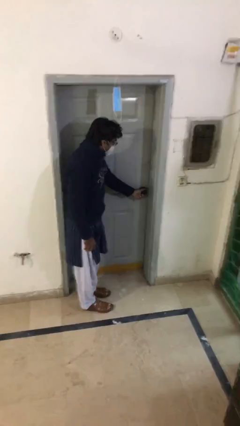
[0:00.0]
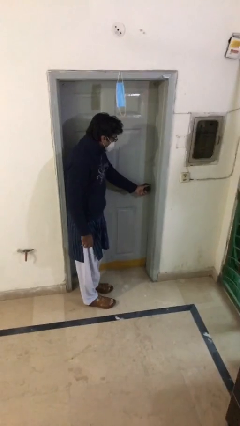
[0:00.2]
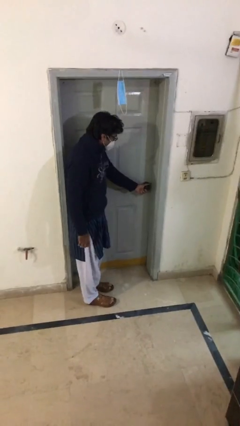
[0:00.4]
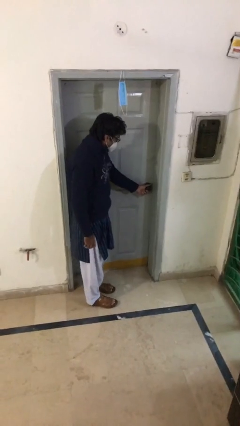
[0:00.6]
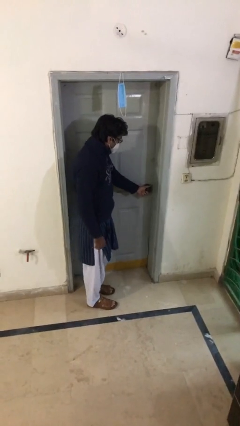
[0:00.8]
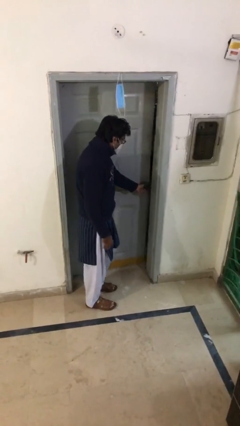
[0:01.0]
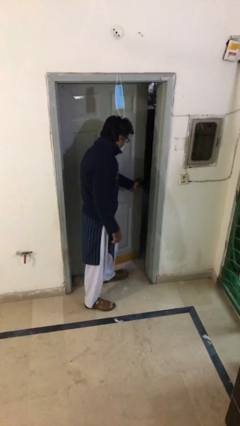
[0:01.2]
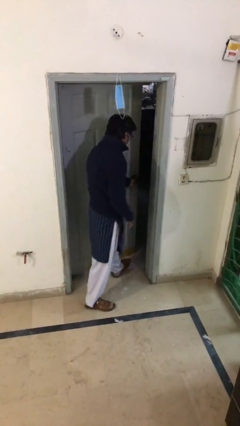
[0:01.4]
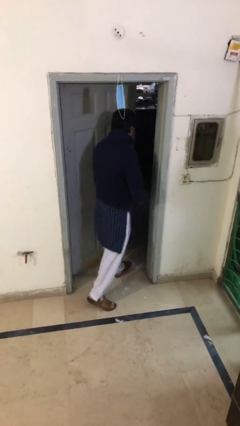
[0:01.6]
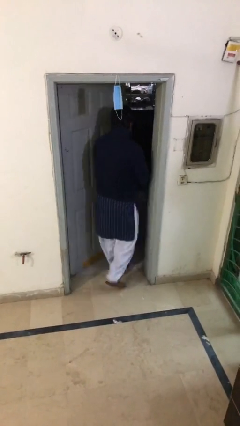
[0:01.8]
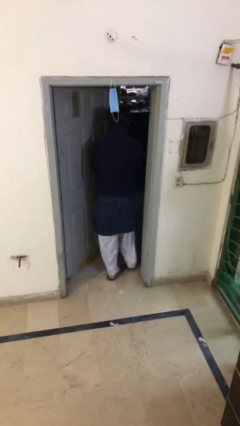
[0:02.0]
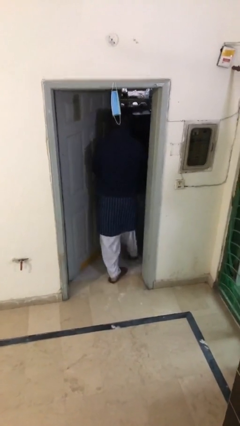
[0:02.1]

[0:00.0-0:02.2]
person opens facility door

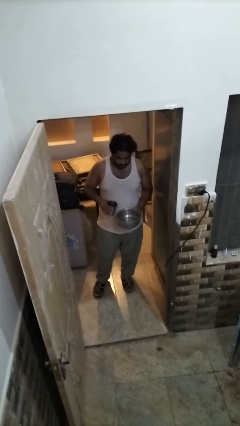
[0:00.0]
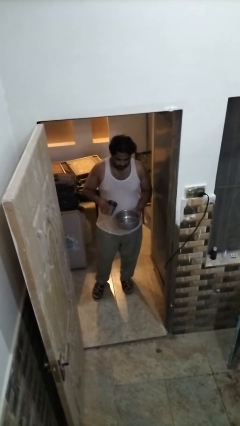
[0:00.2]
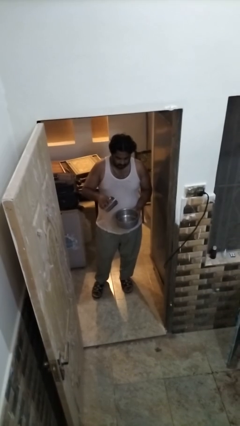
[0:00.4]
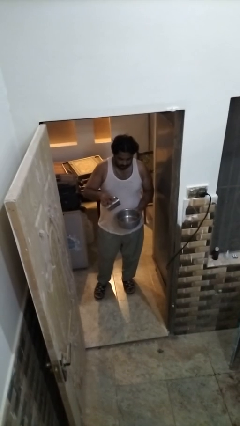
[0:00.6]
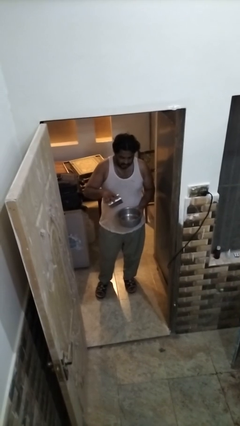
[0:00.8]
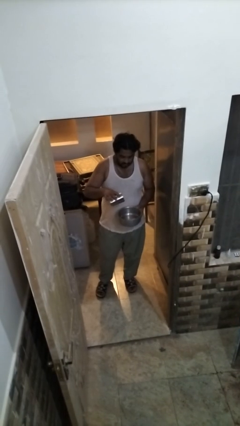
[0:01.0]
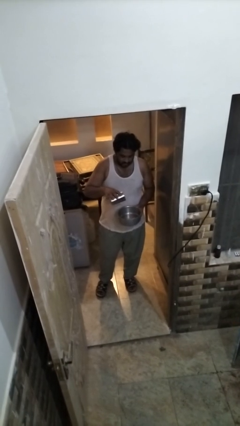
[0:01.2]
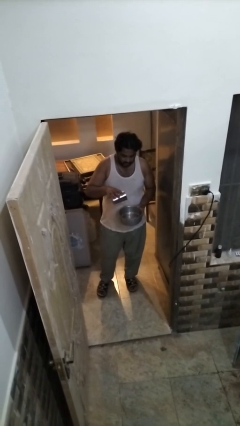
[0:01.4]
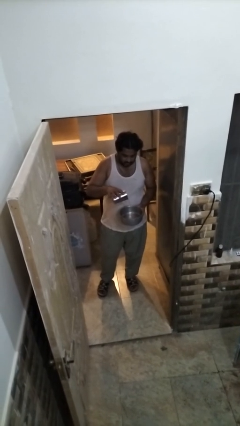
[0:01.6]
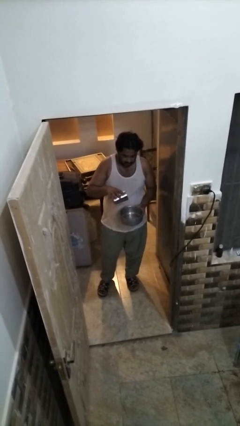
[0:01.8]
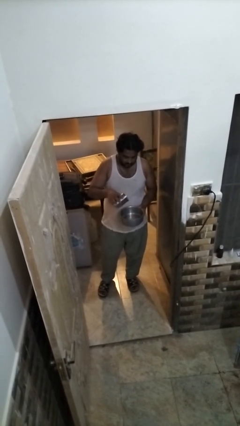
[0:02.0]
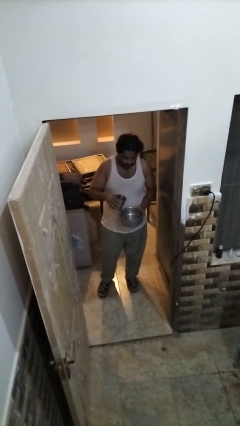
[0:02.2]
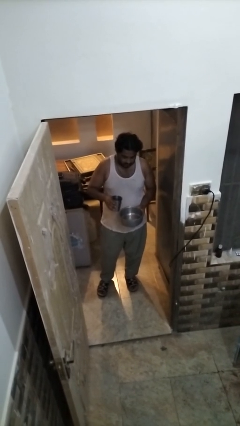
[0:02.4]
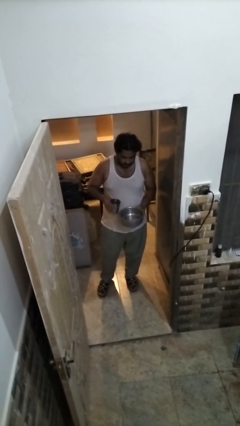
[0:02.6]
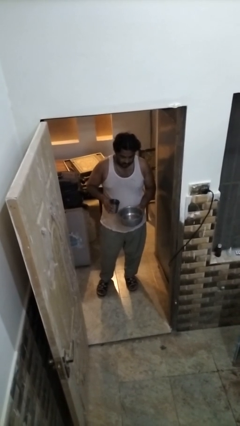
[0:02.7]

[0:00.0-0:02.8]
person pours into bowl

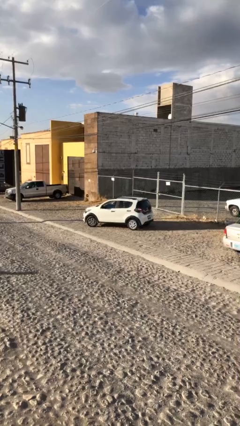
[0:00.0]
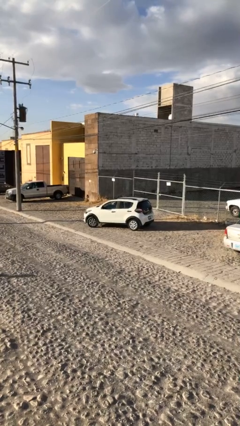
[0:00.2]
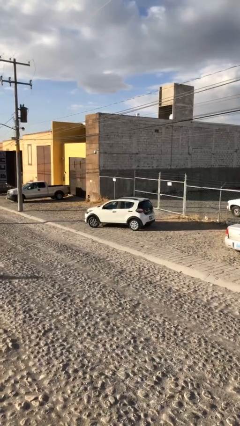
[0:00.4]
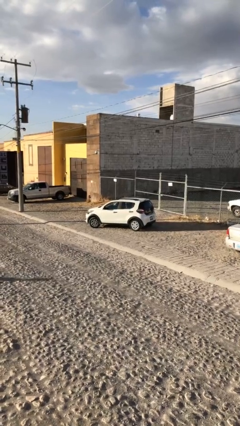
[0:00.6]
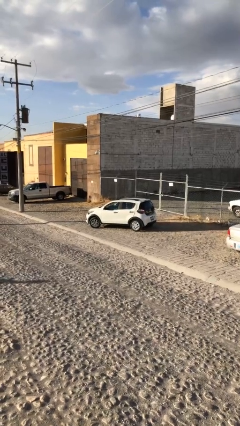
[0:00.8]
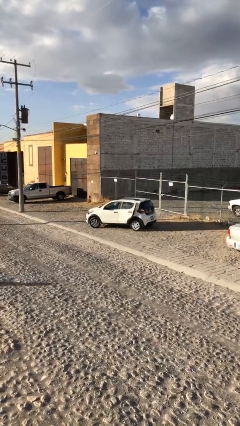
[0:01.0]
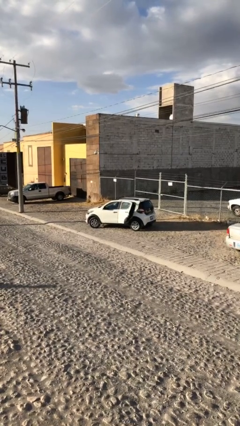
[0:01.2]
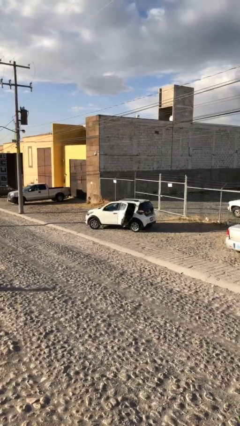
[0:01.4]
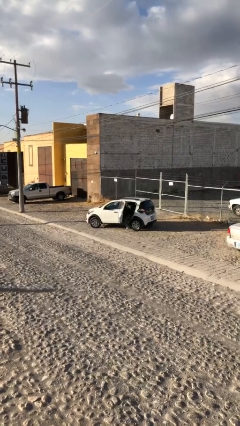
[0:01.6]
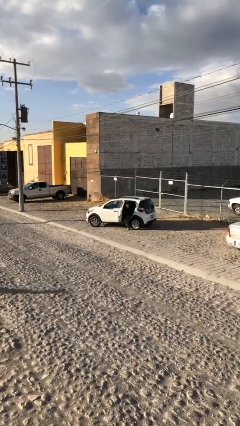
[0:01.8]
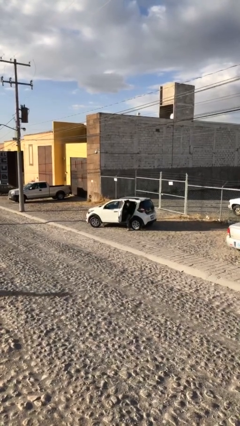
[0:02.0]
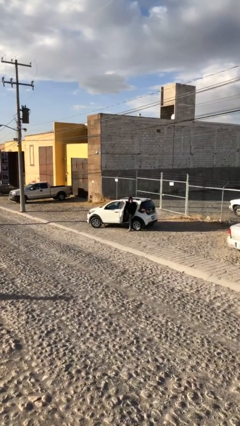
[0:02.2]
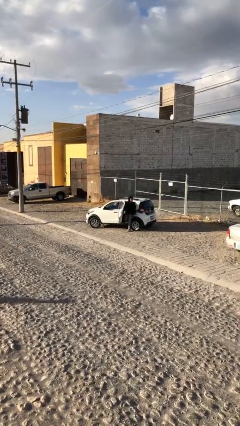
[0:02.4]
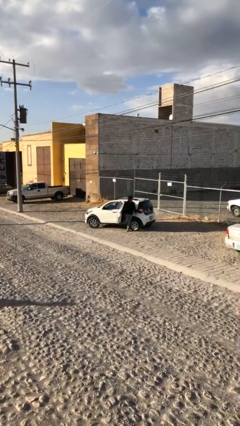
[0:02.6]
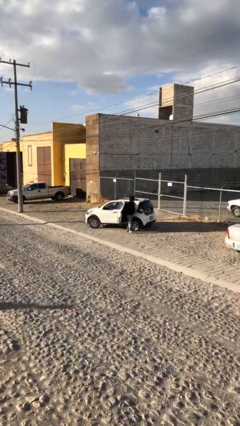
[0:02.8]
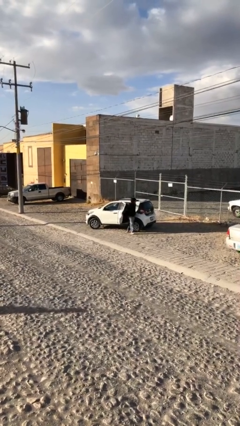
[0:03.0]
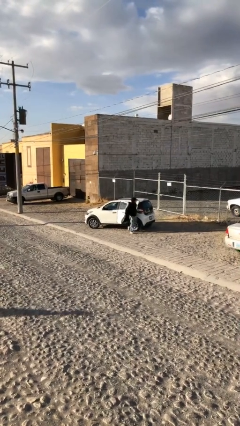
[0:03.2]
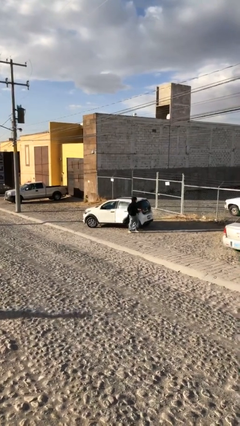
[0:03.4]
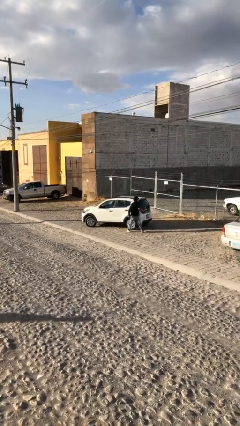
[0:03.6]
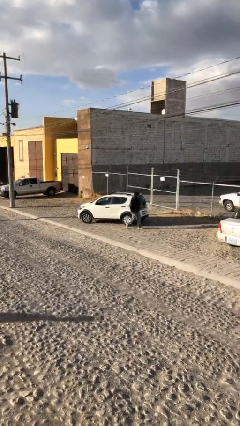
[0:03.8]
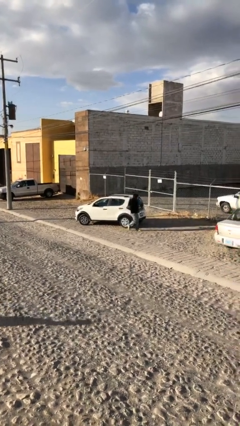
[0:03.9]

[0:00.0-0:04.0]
car drops off person

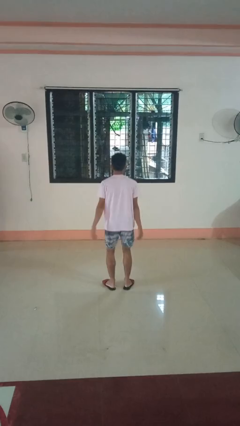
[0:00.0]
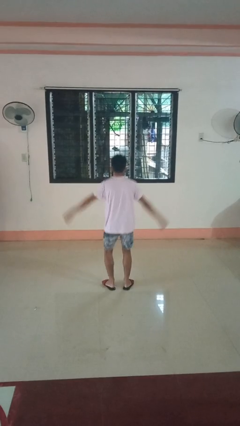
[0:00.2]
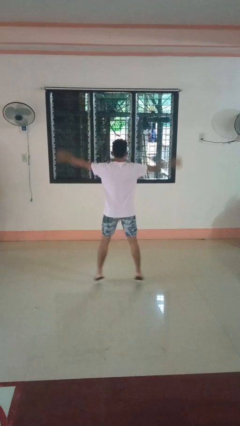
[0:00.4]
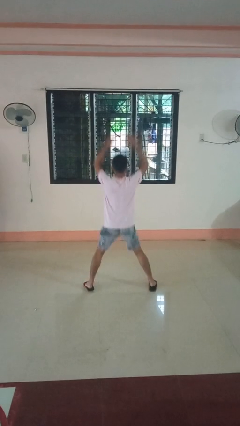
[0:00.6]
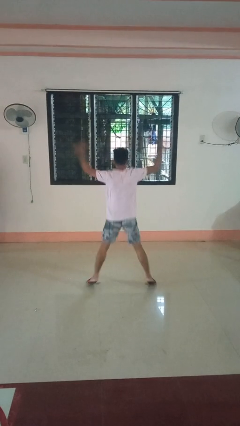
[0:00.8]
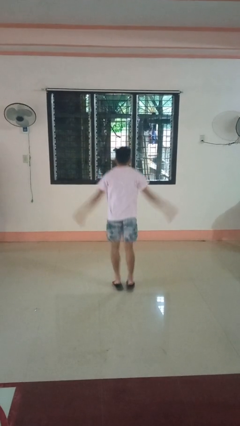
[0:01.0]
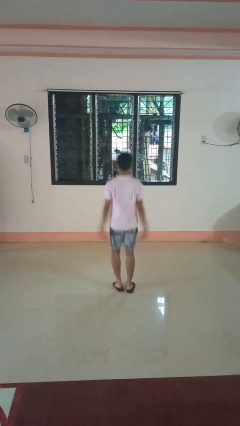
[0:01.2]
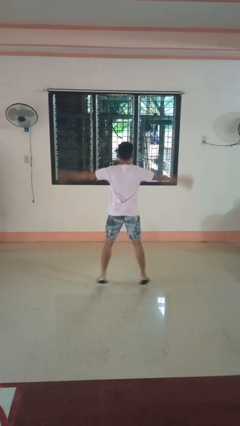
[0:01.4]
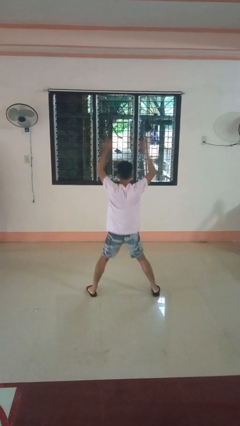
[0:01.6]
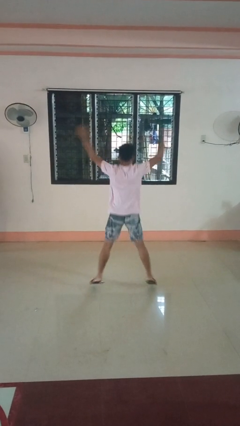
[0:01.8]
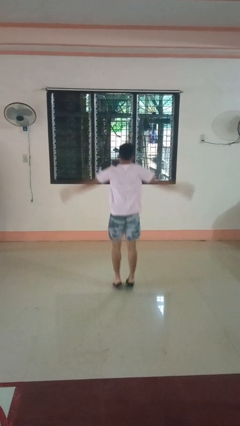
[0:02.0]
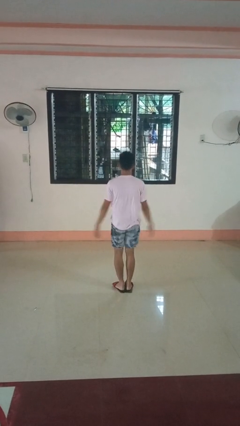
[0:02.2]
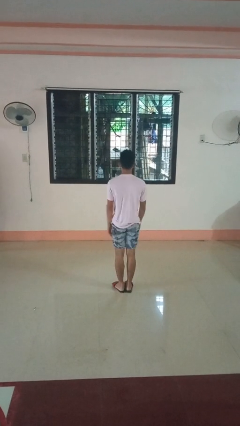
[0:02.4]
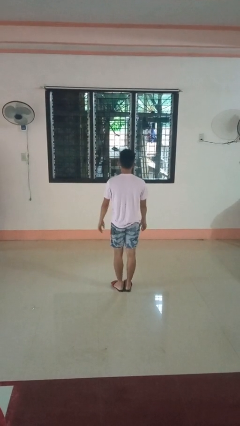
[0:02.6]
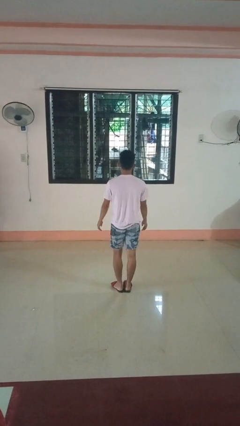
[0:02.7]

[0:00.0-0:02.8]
person exercises with jumping jacks

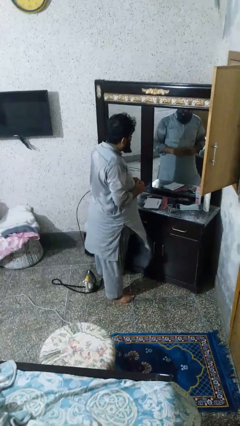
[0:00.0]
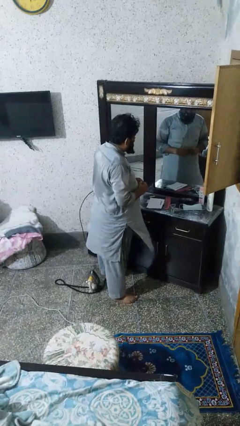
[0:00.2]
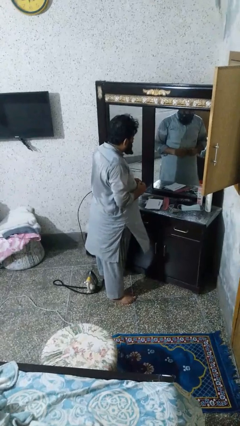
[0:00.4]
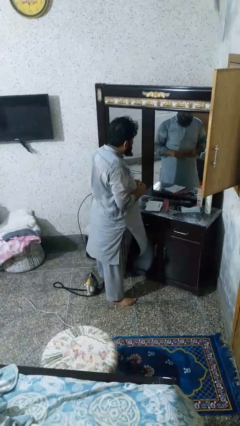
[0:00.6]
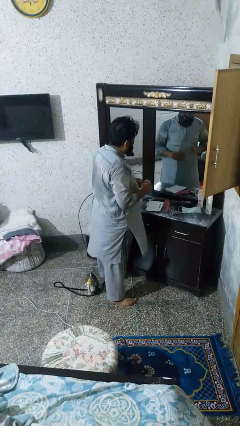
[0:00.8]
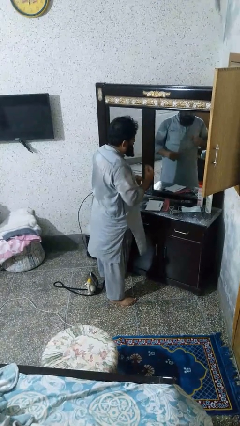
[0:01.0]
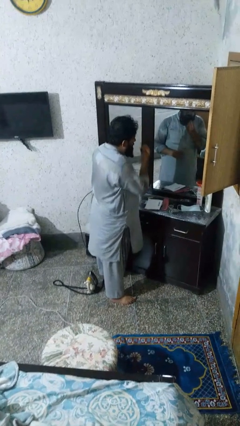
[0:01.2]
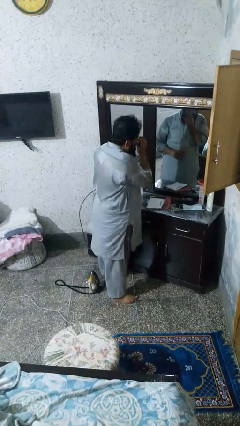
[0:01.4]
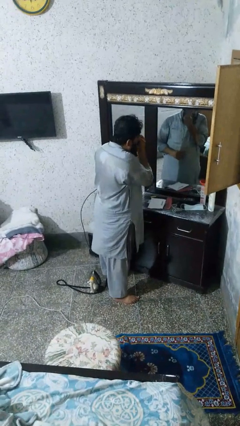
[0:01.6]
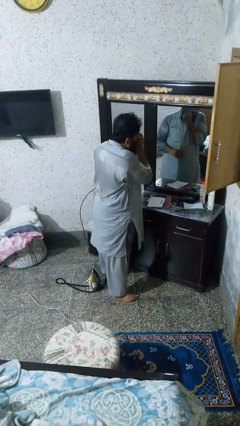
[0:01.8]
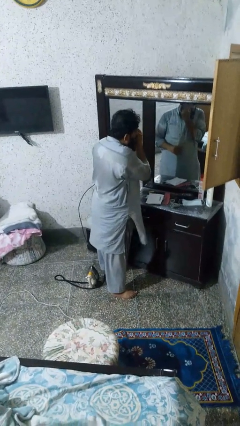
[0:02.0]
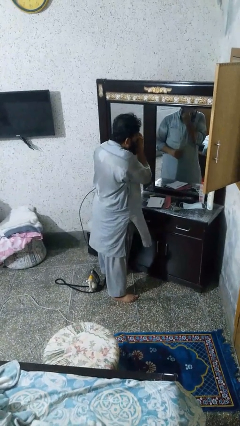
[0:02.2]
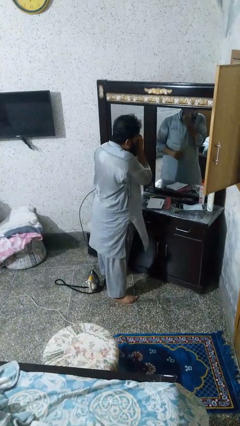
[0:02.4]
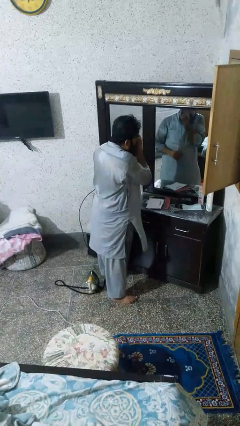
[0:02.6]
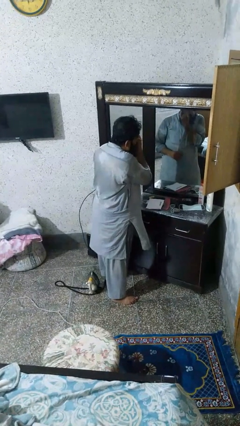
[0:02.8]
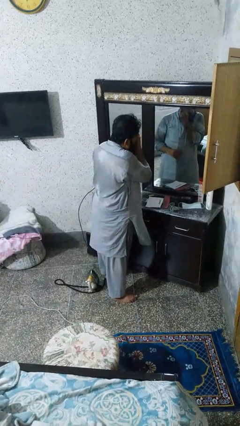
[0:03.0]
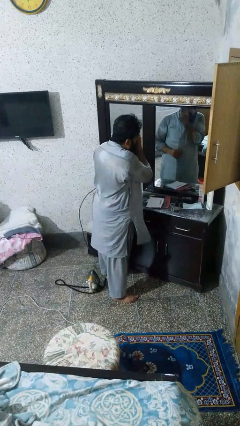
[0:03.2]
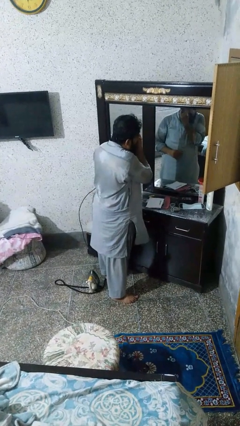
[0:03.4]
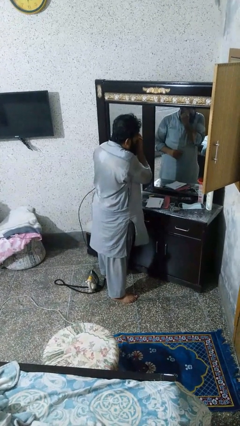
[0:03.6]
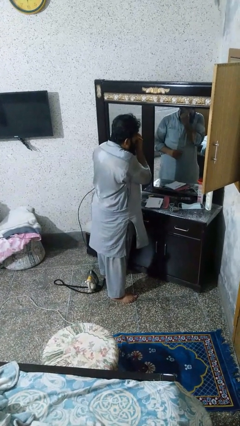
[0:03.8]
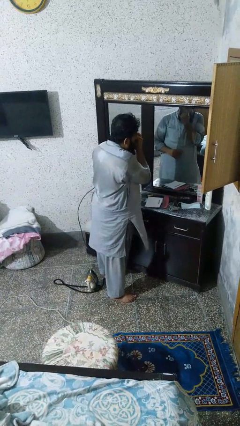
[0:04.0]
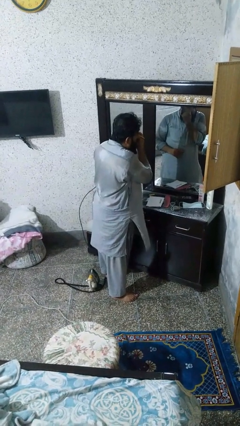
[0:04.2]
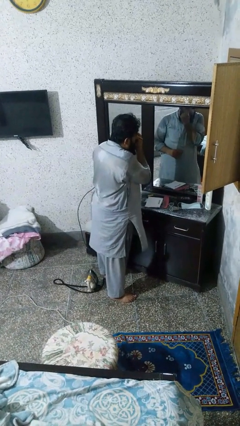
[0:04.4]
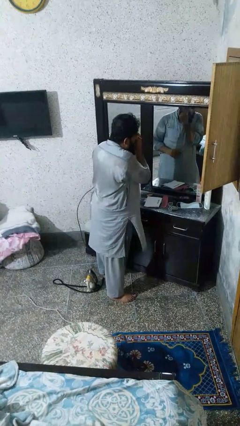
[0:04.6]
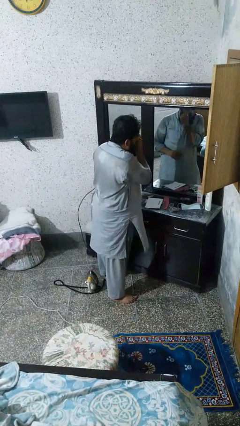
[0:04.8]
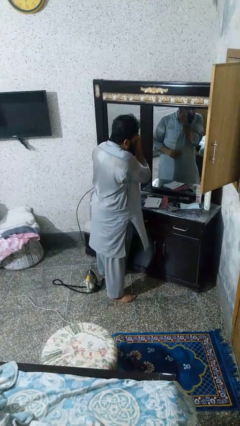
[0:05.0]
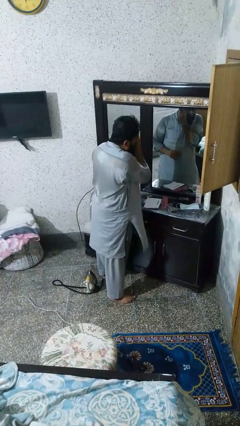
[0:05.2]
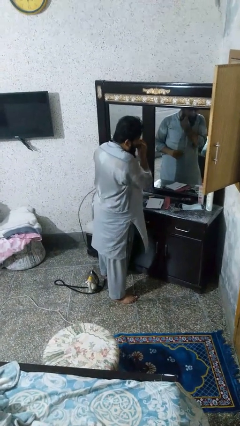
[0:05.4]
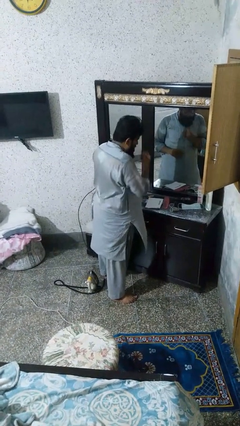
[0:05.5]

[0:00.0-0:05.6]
person applies eye makeup

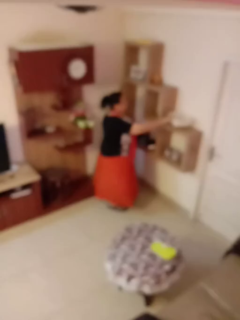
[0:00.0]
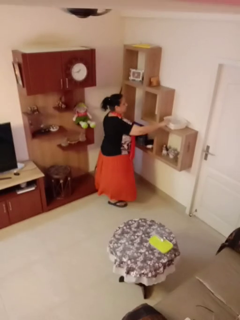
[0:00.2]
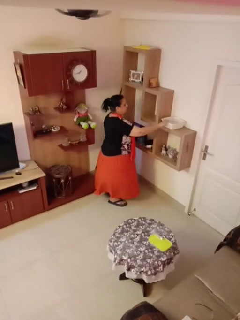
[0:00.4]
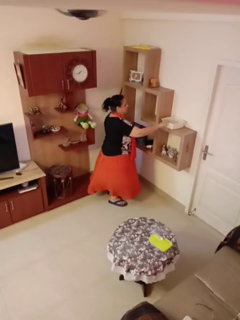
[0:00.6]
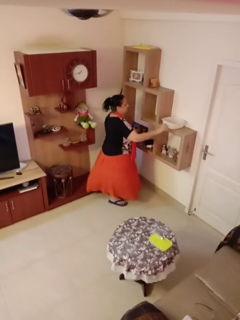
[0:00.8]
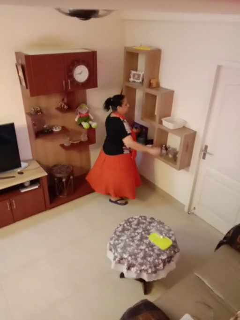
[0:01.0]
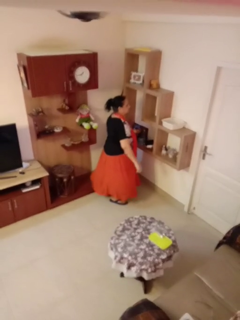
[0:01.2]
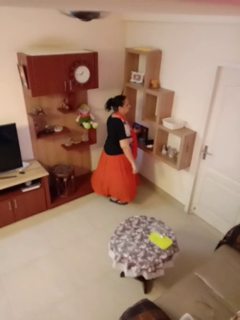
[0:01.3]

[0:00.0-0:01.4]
person puts down object on shelf
